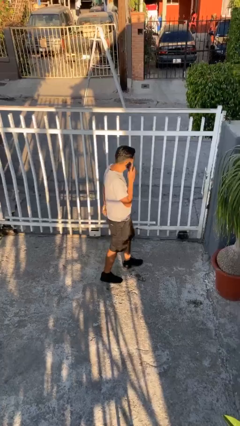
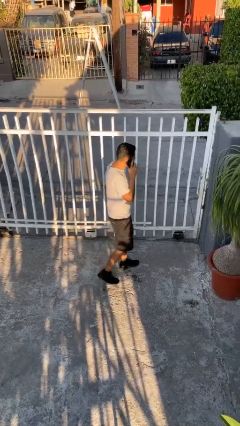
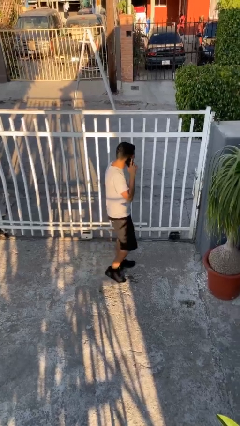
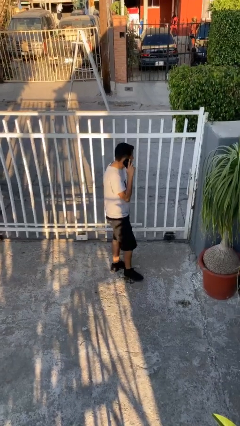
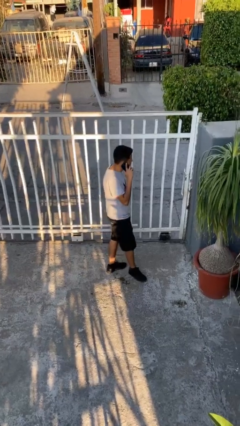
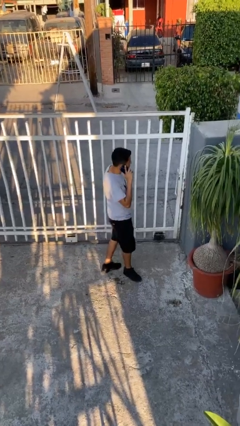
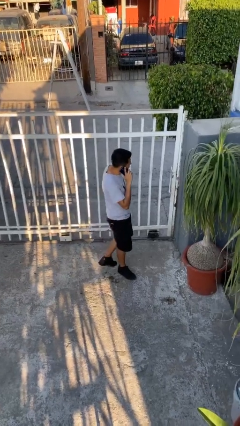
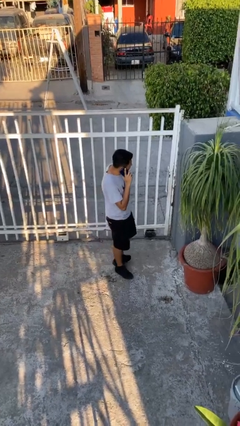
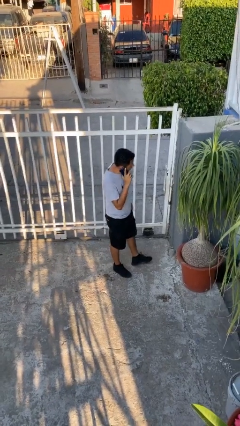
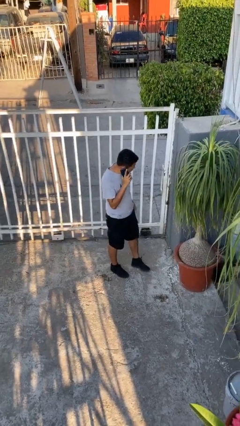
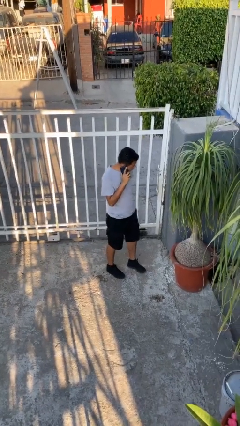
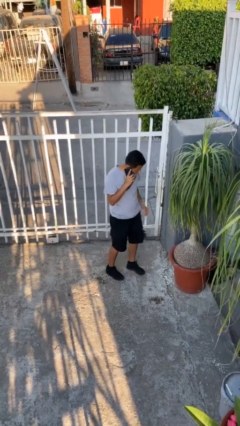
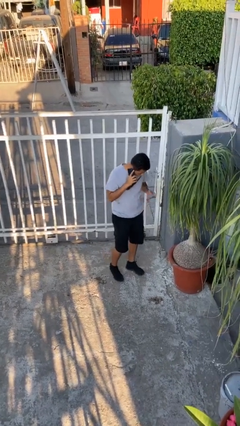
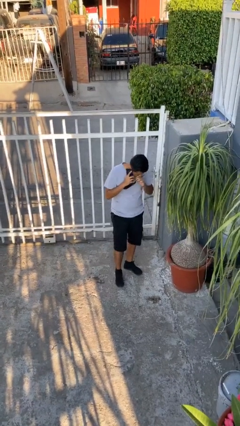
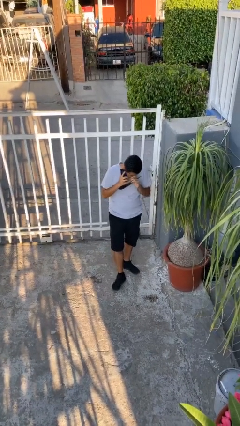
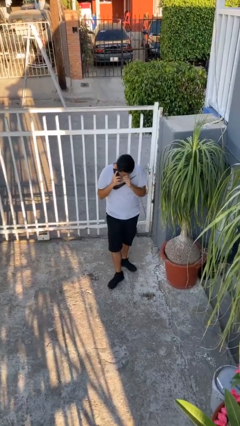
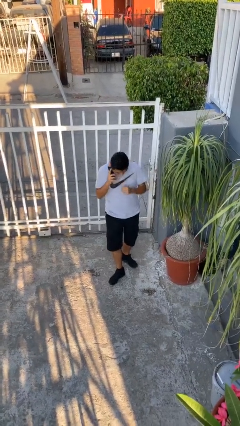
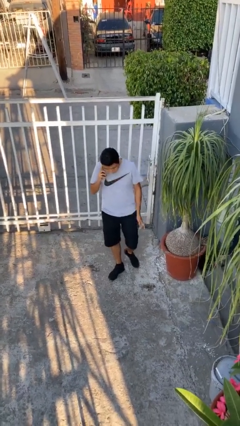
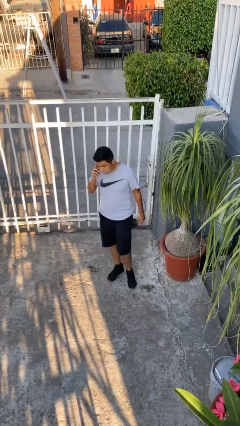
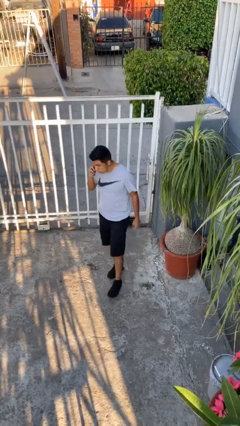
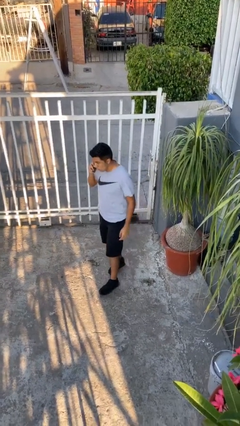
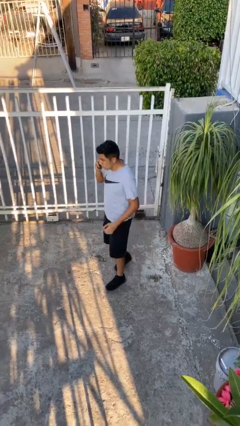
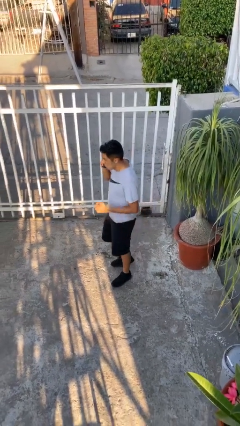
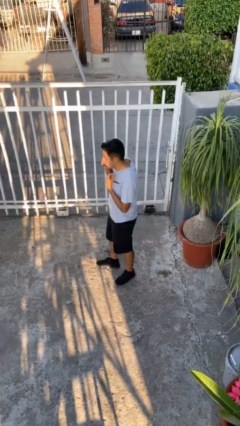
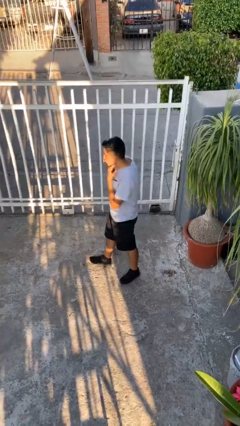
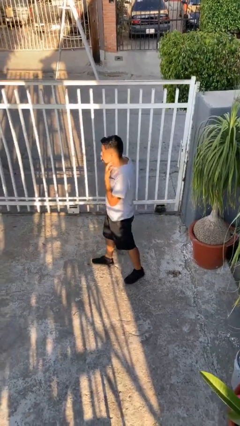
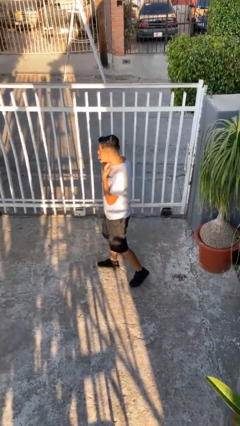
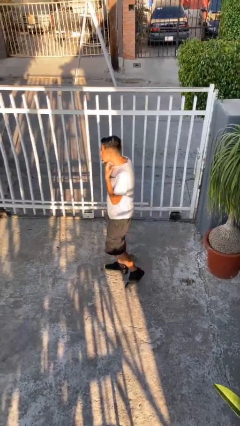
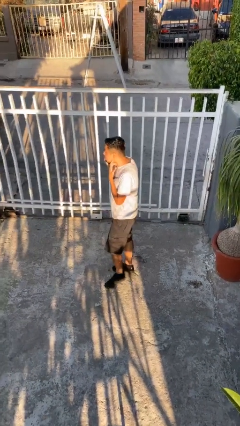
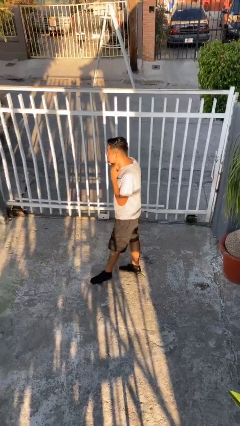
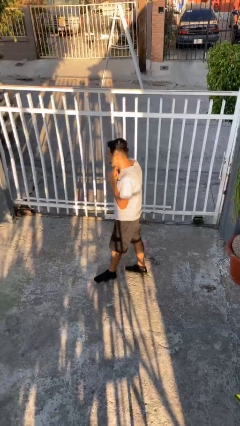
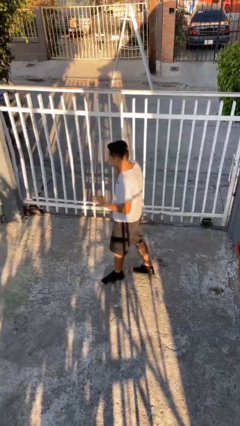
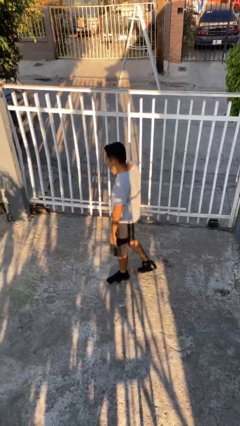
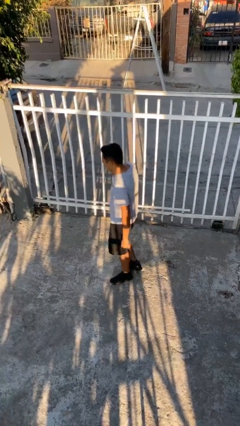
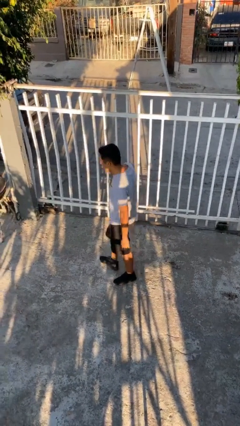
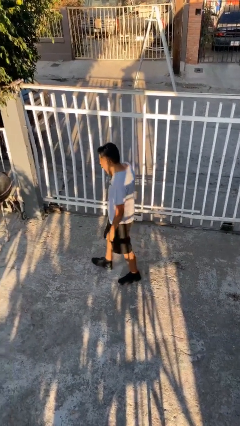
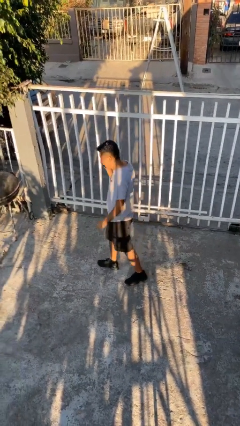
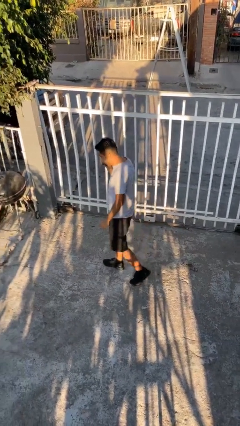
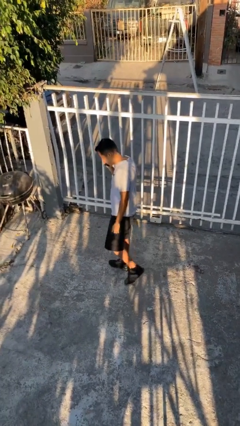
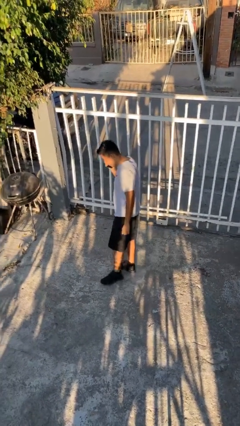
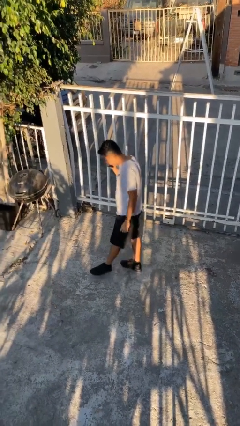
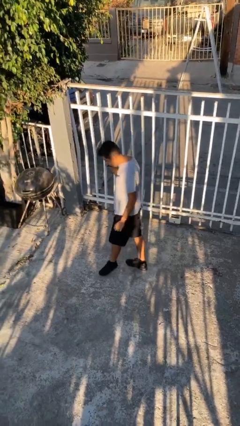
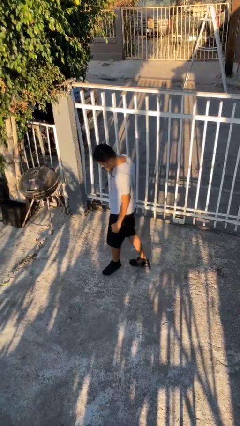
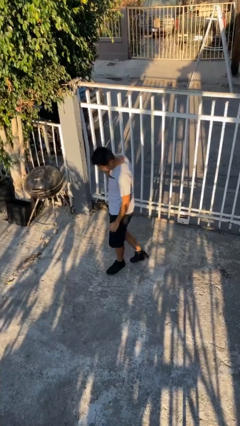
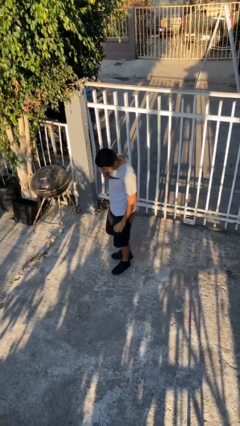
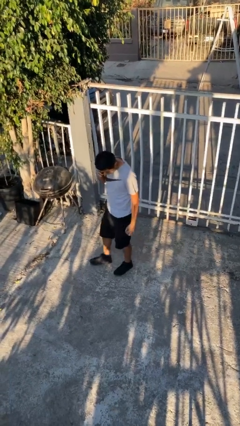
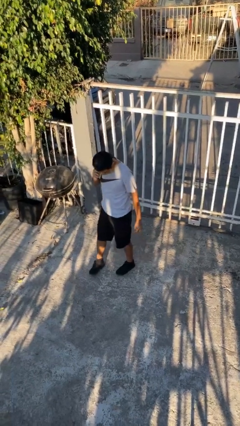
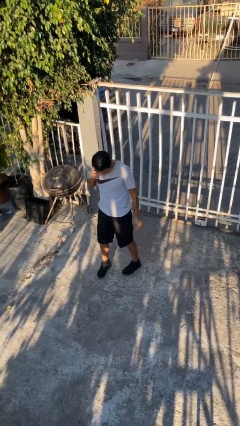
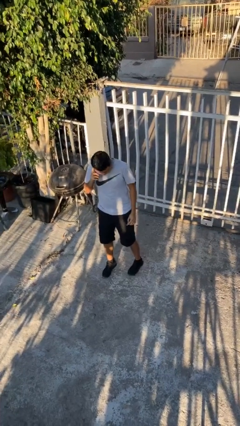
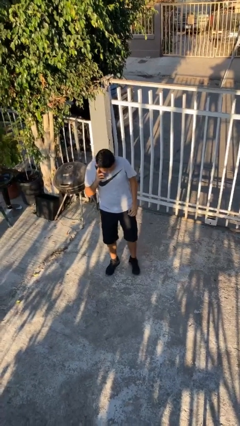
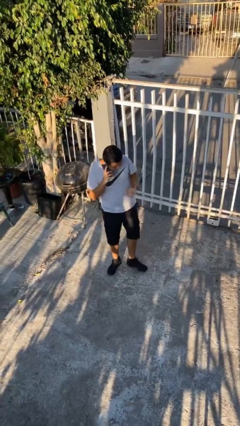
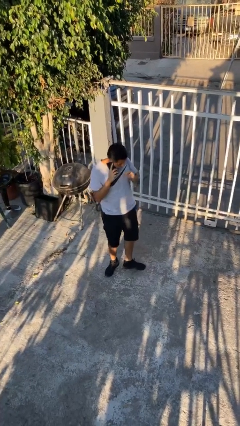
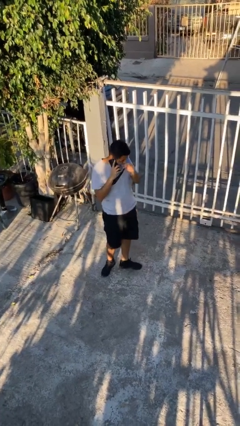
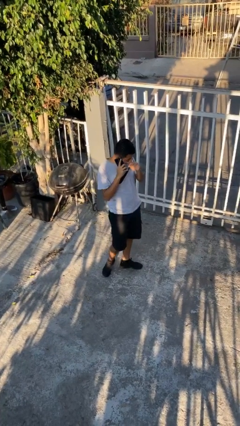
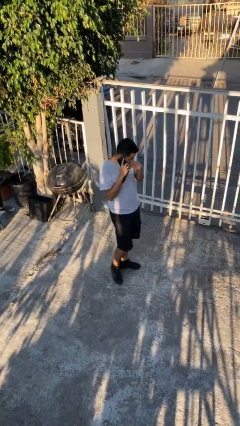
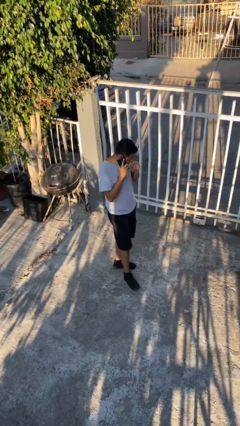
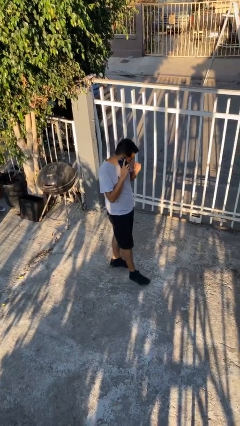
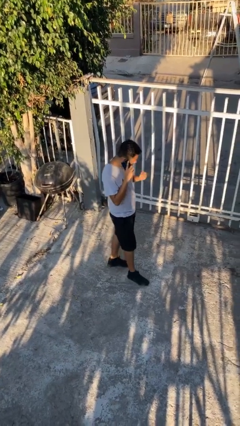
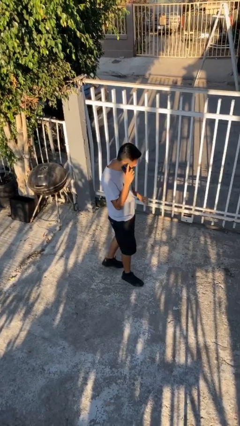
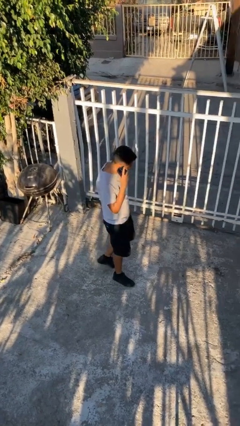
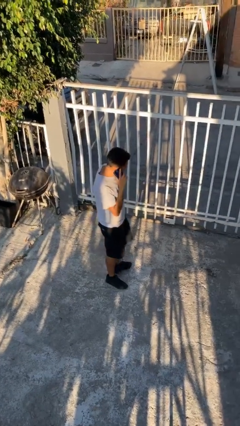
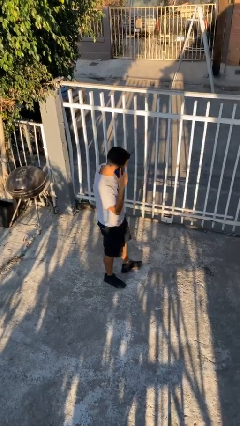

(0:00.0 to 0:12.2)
person talks on phone

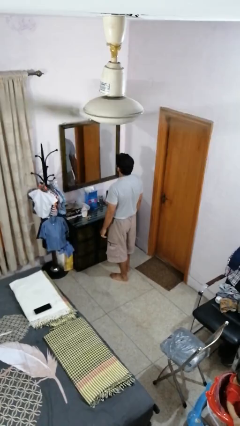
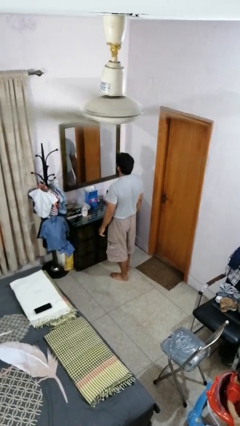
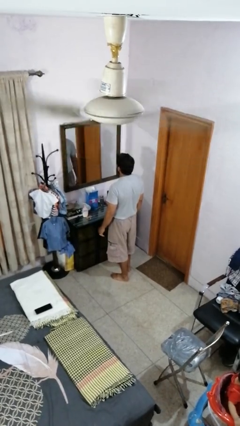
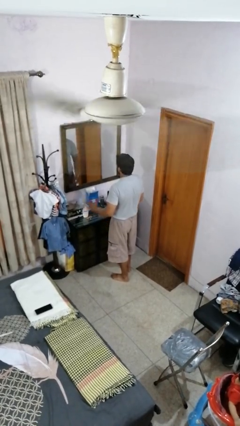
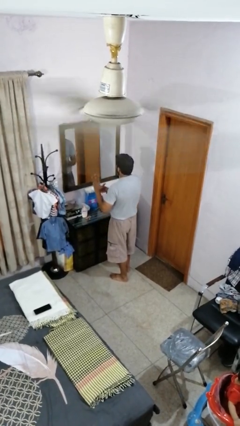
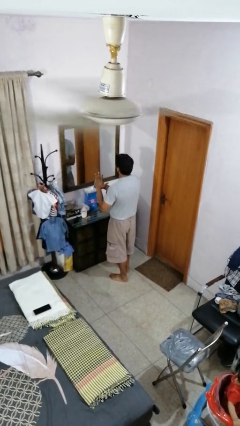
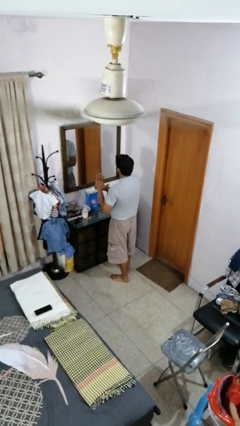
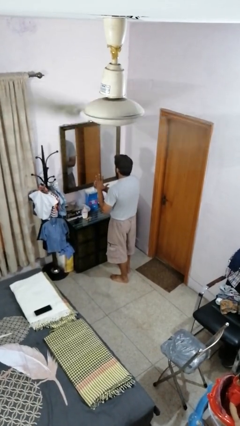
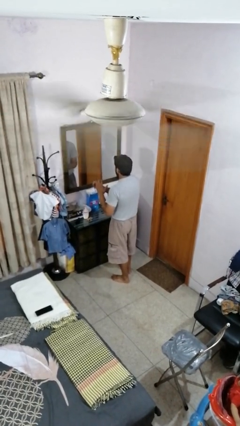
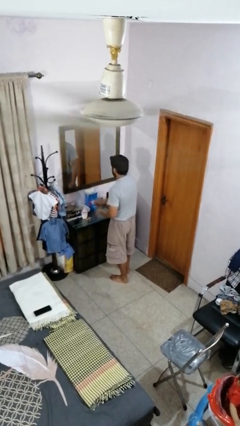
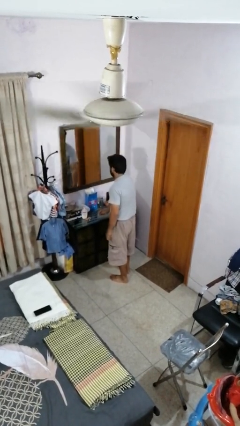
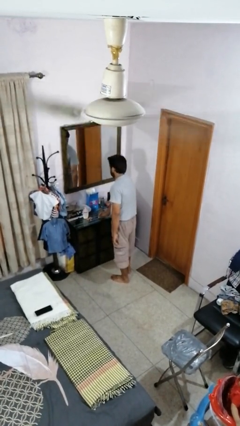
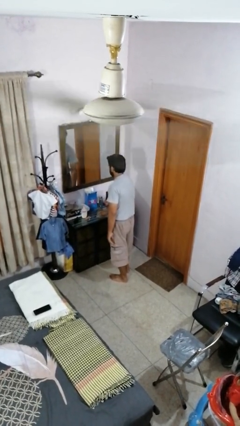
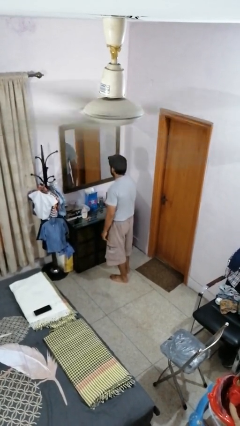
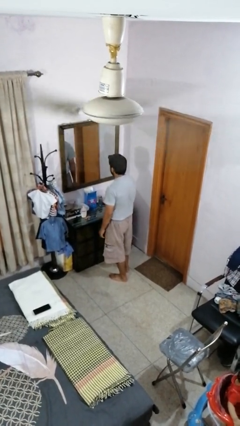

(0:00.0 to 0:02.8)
person takes off ring

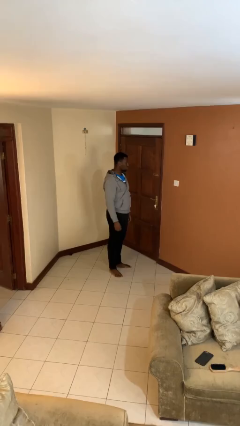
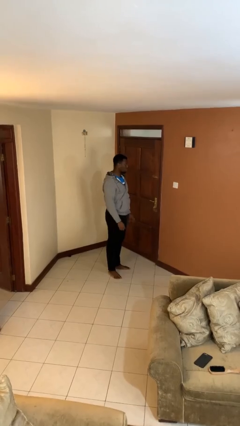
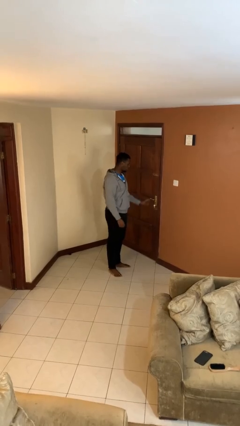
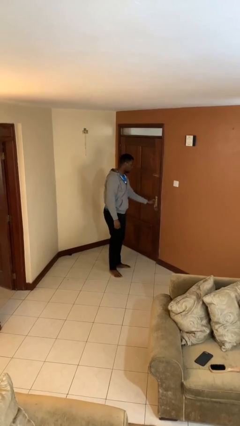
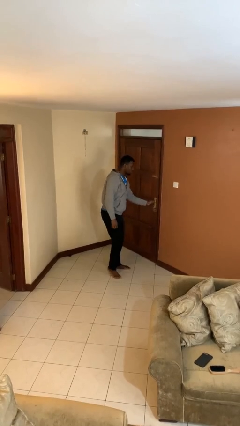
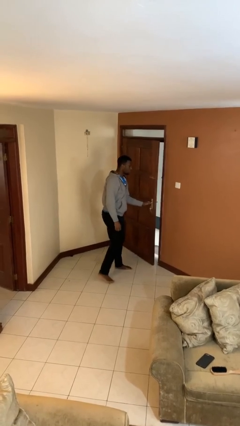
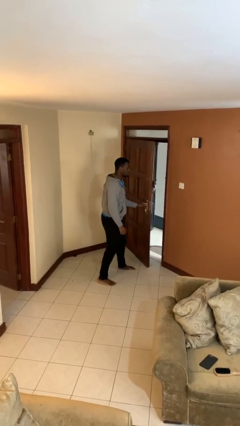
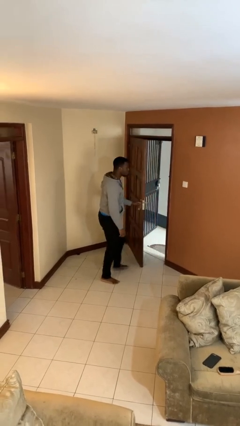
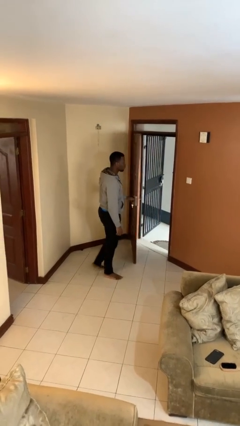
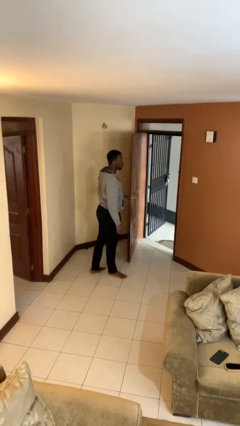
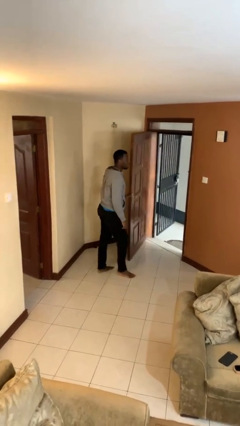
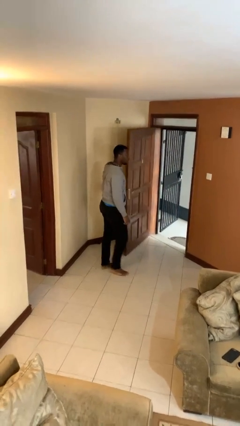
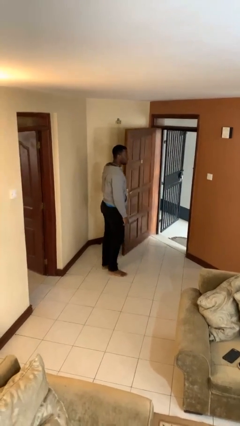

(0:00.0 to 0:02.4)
person opens facility door

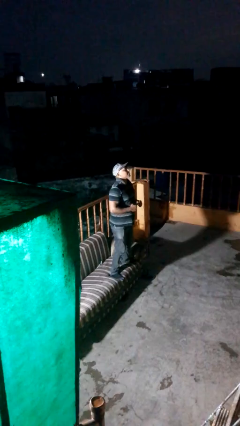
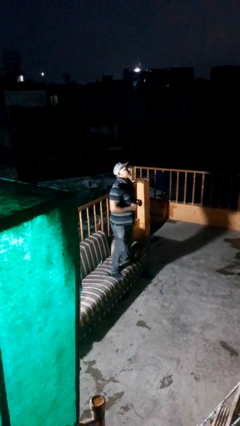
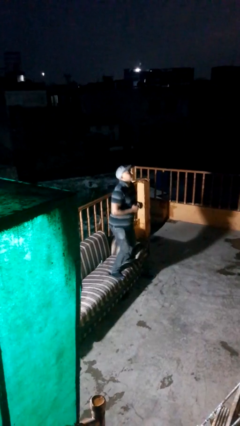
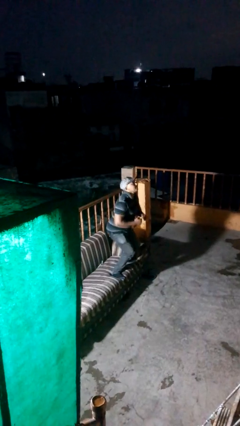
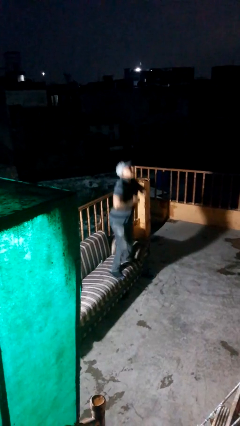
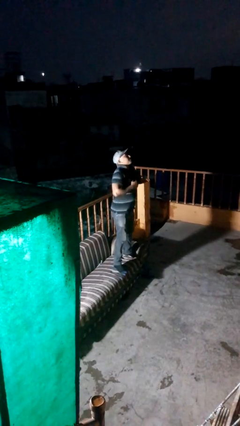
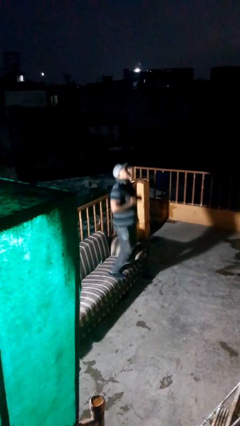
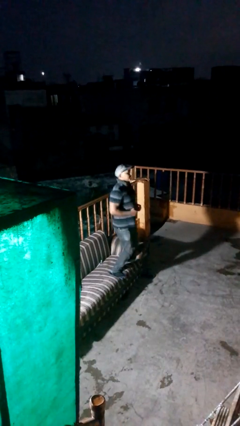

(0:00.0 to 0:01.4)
person jumps on couch
